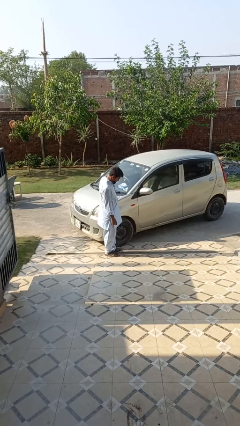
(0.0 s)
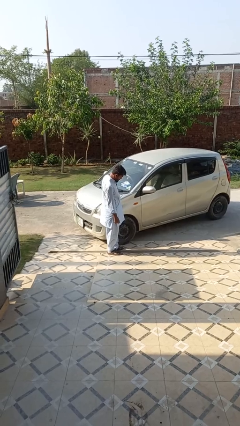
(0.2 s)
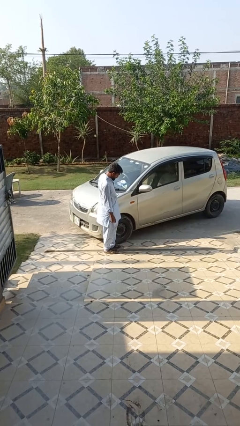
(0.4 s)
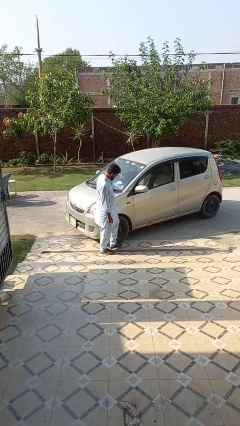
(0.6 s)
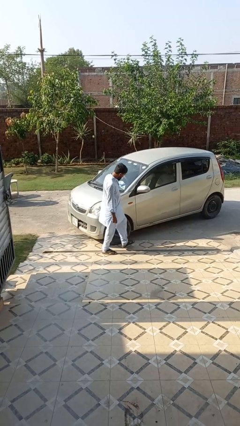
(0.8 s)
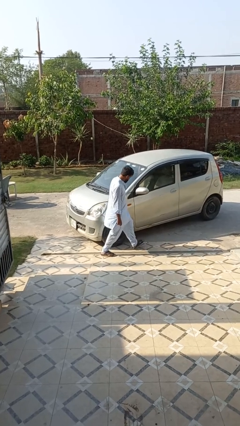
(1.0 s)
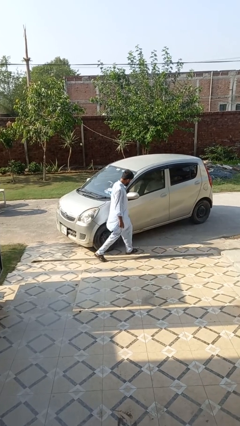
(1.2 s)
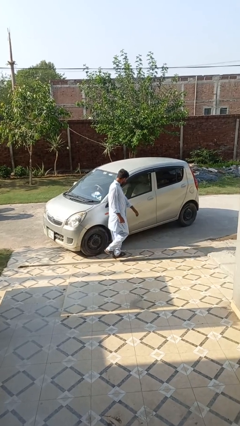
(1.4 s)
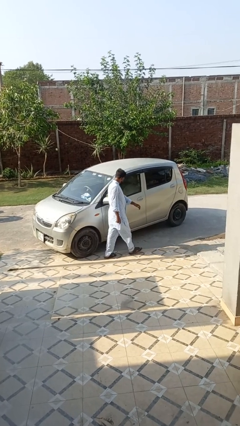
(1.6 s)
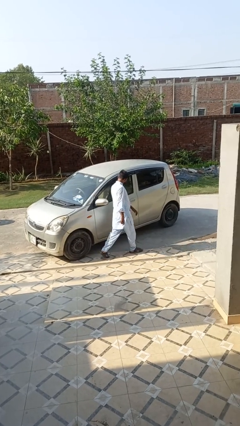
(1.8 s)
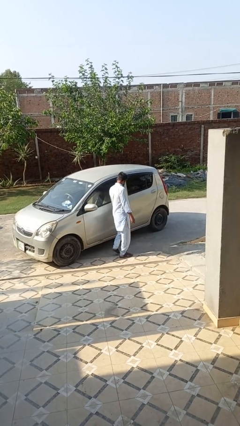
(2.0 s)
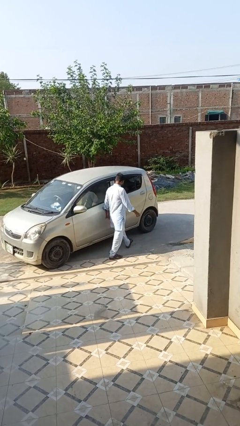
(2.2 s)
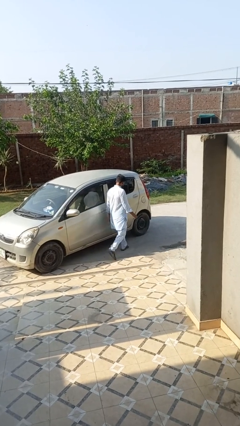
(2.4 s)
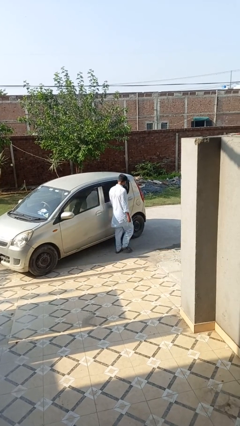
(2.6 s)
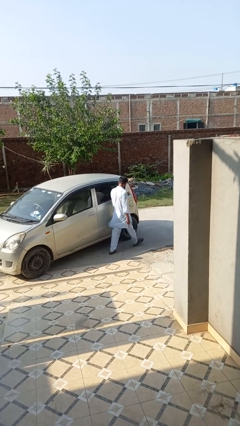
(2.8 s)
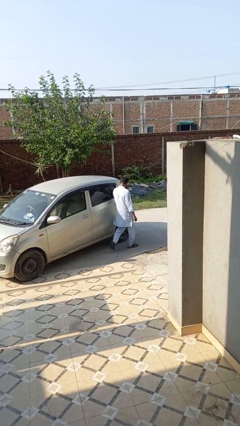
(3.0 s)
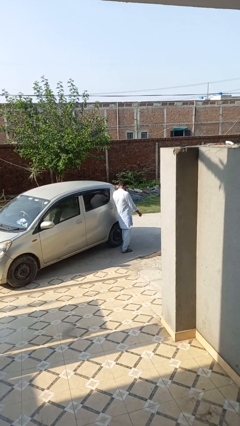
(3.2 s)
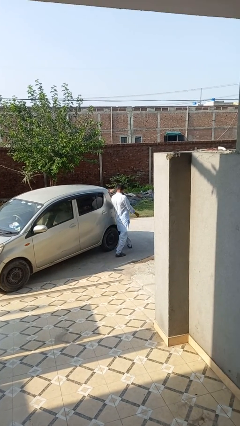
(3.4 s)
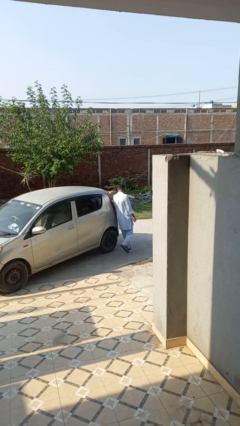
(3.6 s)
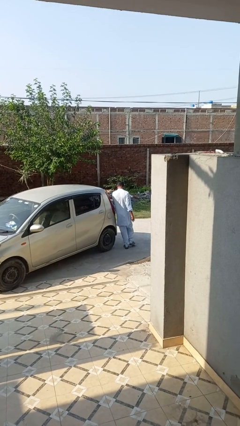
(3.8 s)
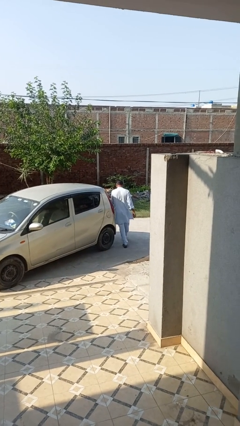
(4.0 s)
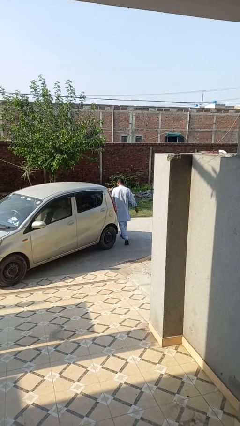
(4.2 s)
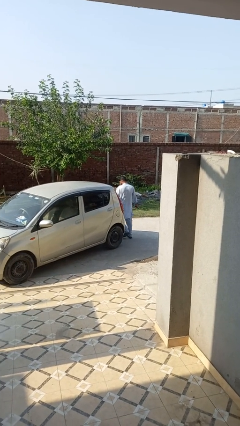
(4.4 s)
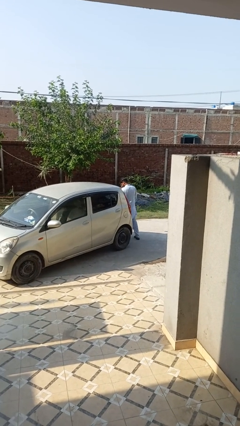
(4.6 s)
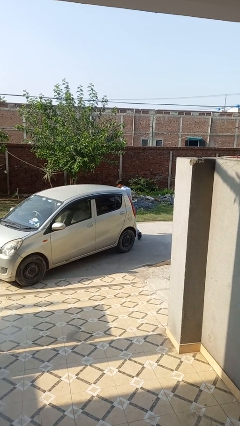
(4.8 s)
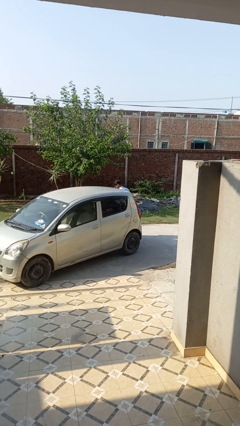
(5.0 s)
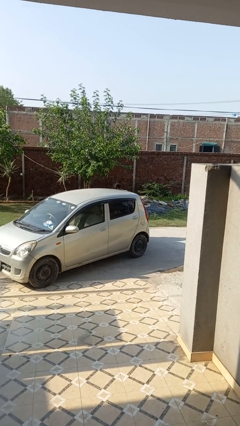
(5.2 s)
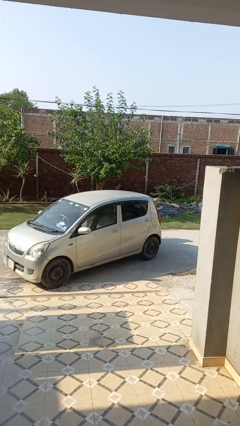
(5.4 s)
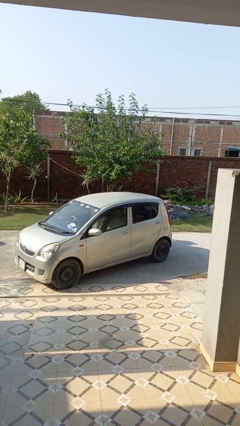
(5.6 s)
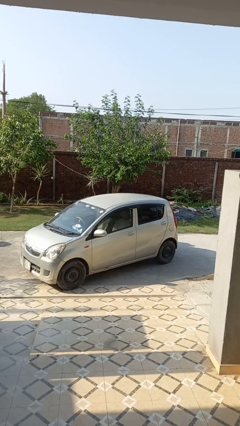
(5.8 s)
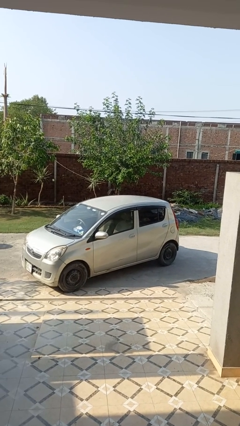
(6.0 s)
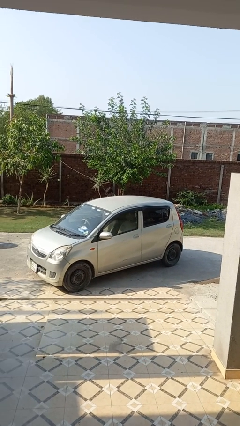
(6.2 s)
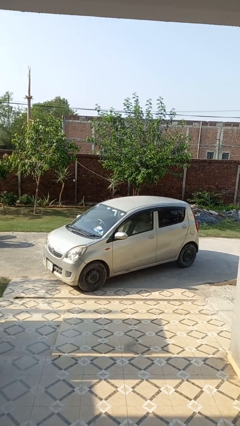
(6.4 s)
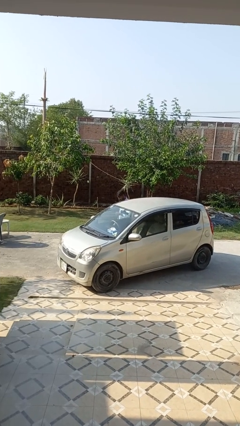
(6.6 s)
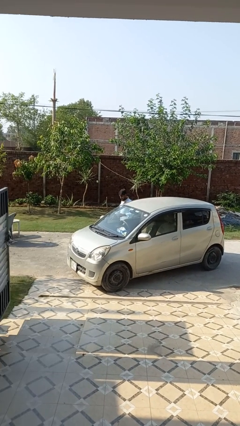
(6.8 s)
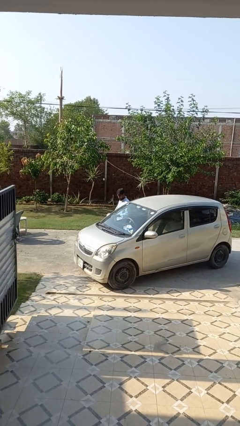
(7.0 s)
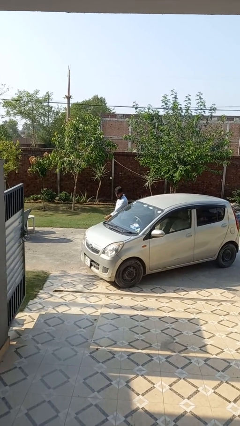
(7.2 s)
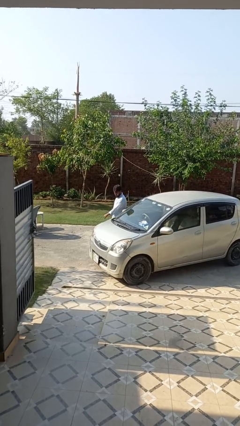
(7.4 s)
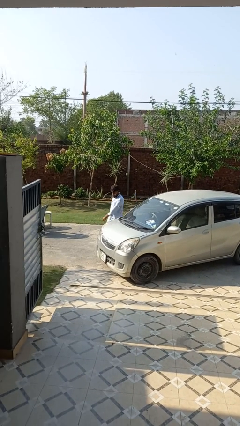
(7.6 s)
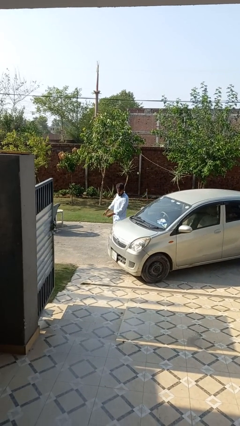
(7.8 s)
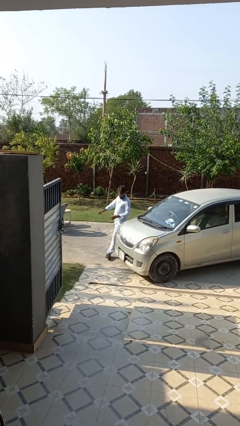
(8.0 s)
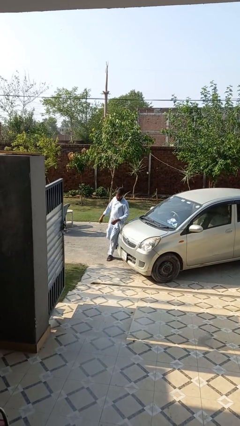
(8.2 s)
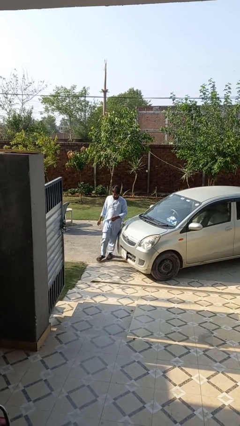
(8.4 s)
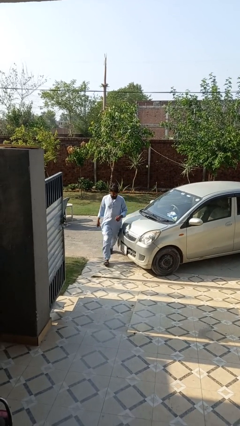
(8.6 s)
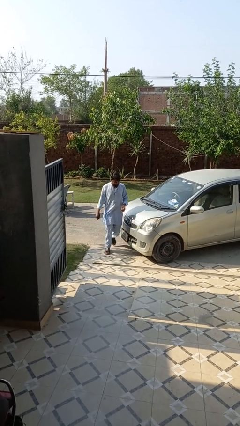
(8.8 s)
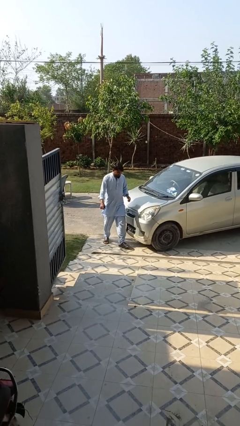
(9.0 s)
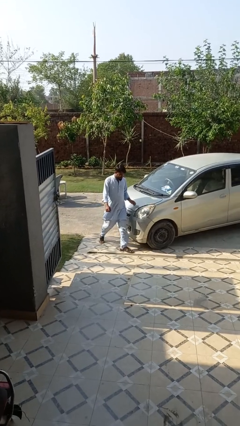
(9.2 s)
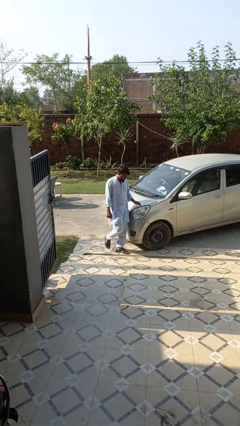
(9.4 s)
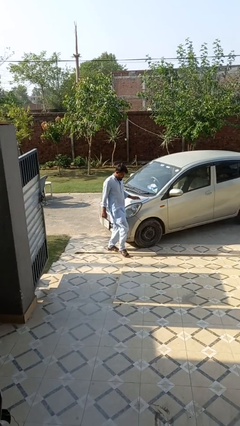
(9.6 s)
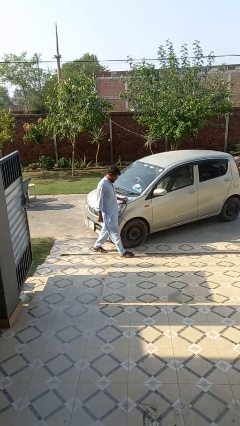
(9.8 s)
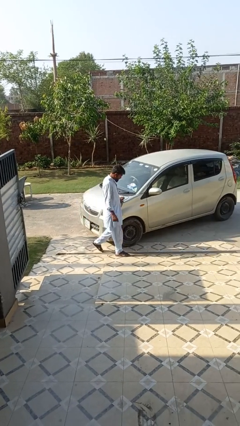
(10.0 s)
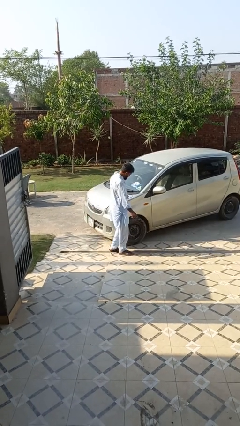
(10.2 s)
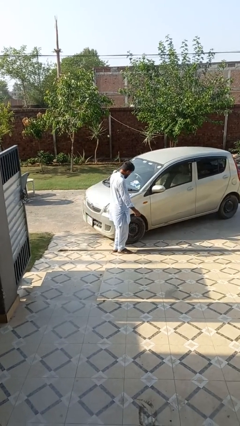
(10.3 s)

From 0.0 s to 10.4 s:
person walks around car

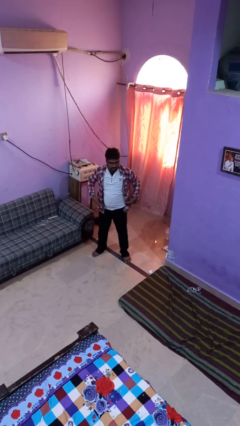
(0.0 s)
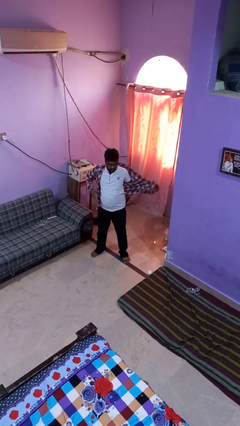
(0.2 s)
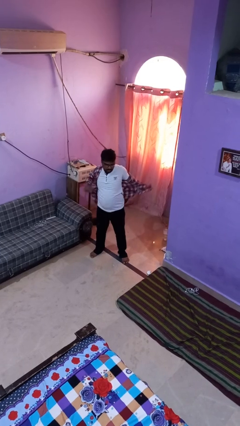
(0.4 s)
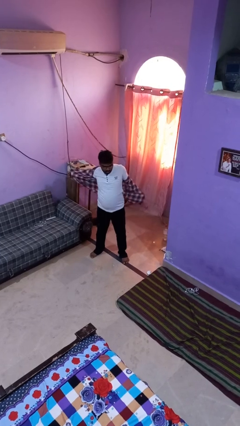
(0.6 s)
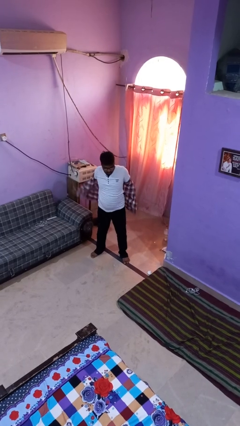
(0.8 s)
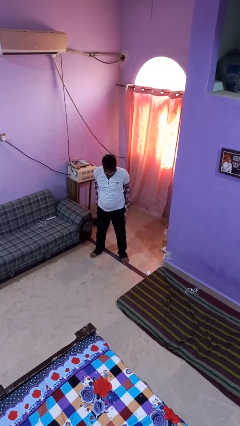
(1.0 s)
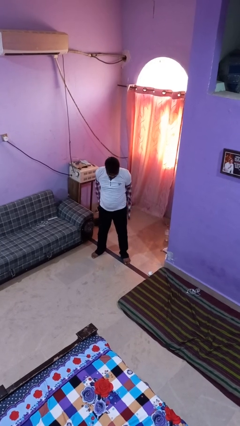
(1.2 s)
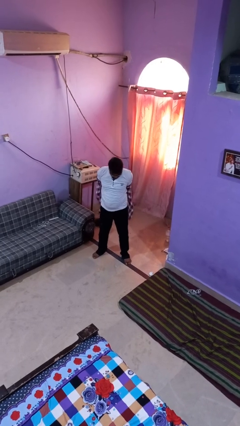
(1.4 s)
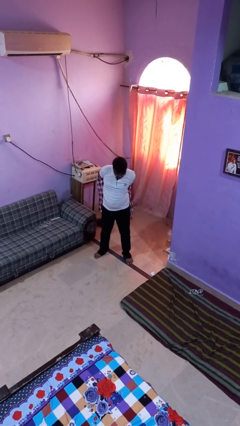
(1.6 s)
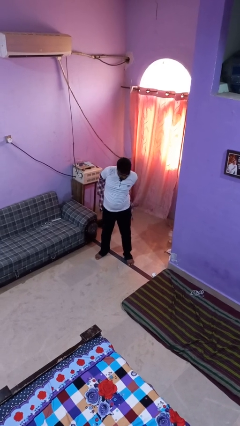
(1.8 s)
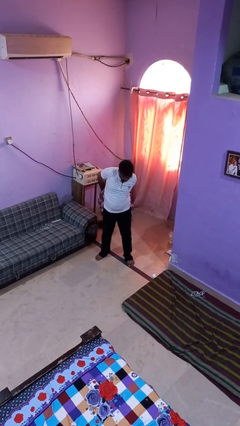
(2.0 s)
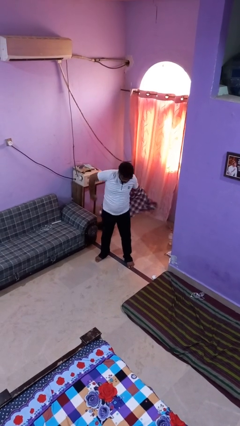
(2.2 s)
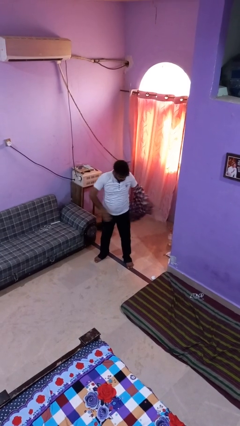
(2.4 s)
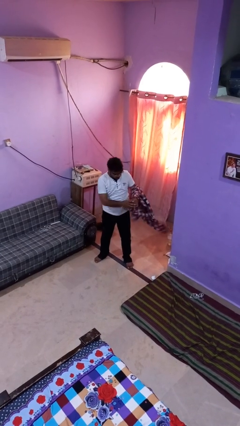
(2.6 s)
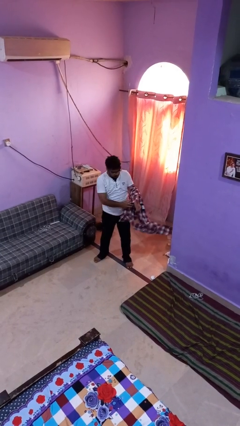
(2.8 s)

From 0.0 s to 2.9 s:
person takes off shirt

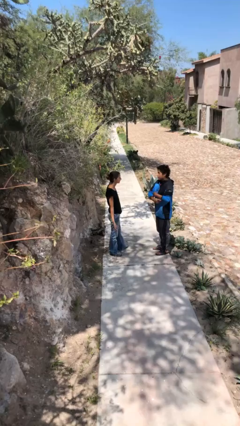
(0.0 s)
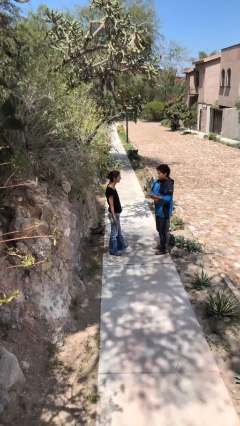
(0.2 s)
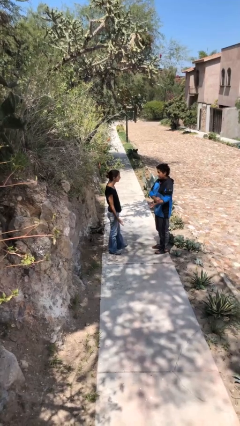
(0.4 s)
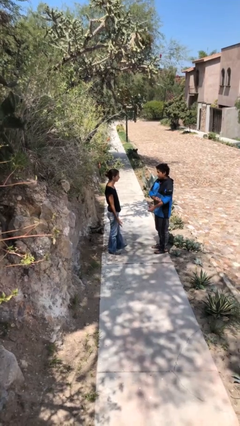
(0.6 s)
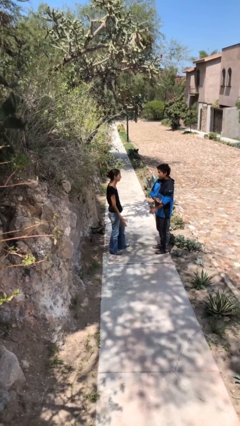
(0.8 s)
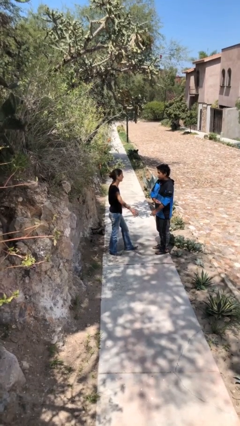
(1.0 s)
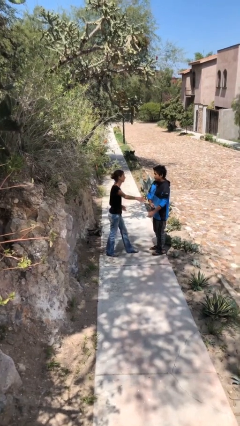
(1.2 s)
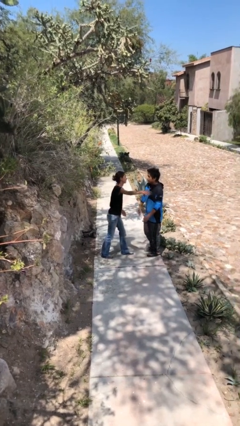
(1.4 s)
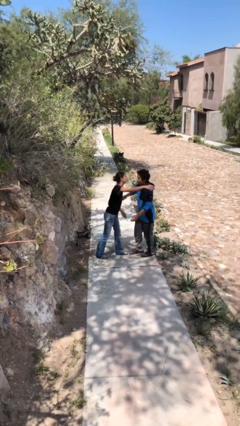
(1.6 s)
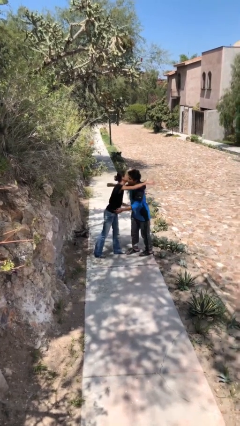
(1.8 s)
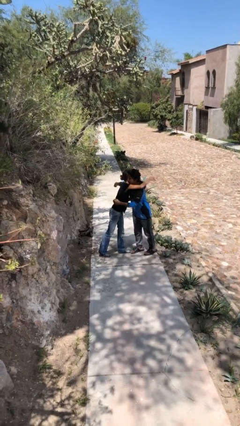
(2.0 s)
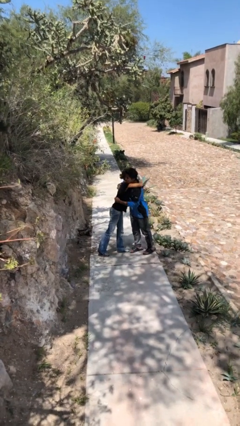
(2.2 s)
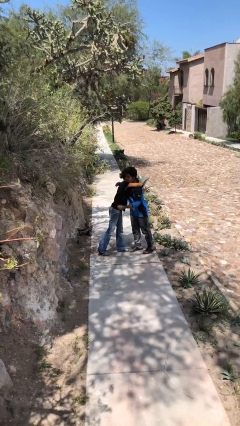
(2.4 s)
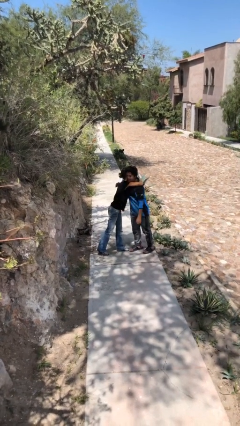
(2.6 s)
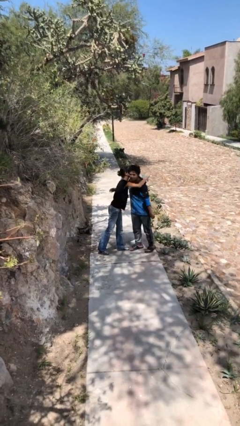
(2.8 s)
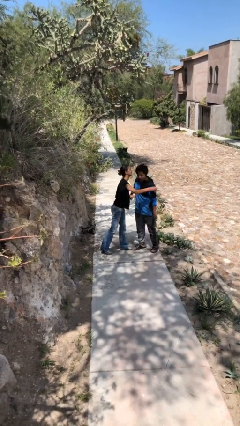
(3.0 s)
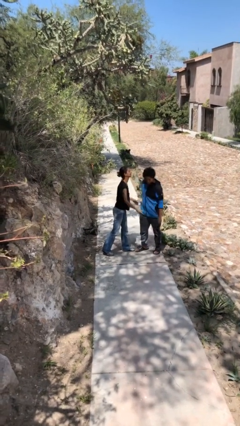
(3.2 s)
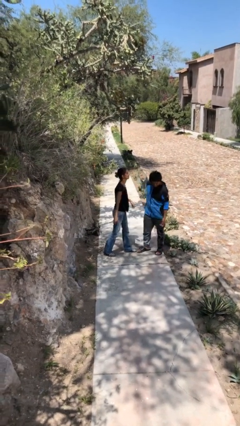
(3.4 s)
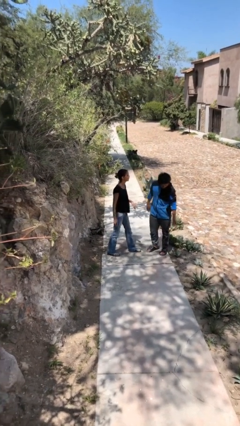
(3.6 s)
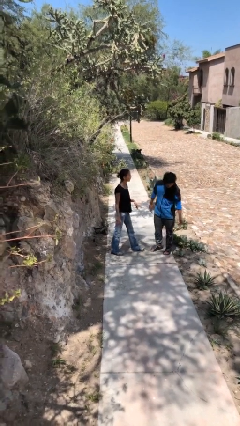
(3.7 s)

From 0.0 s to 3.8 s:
person embraces person

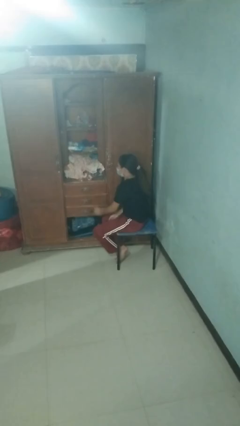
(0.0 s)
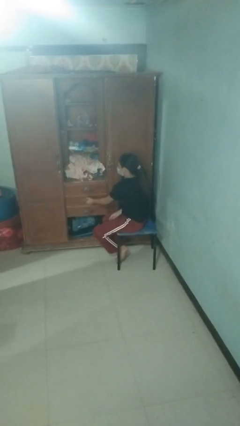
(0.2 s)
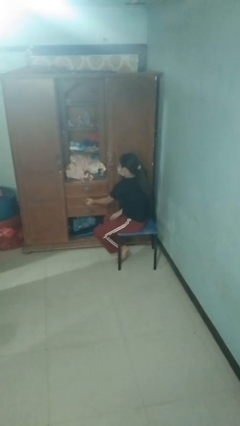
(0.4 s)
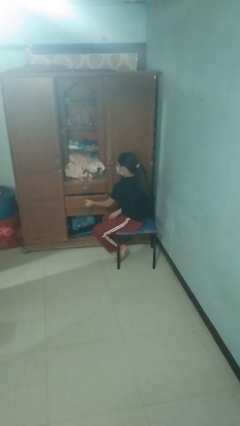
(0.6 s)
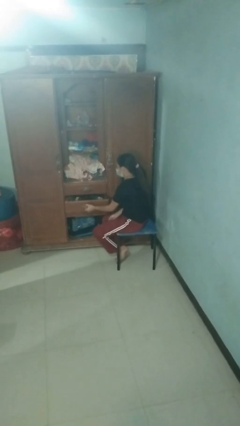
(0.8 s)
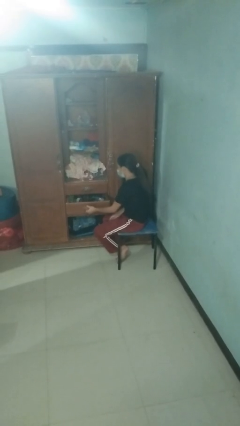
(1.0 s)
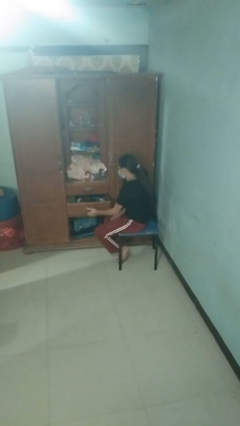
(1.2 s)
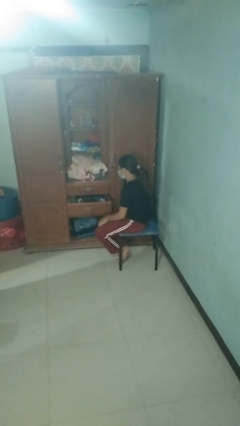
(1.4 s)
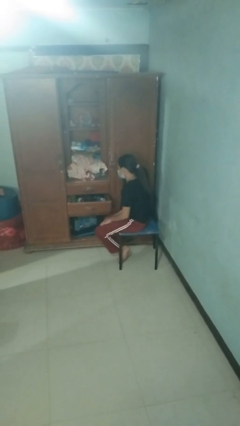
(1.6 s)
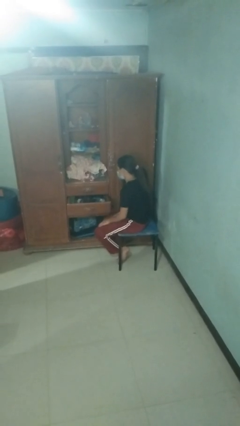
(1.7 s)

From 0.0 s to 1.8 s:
person opens dresser drawer
